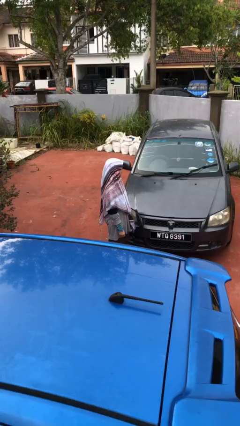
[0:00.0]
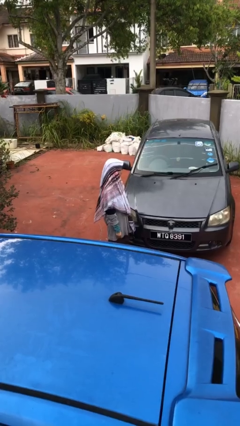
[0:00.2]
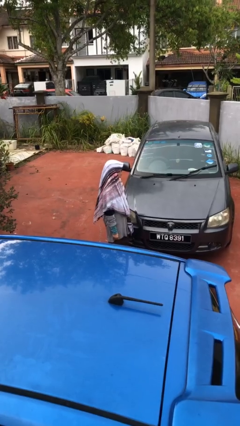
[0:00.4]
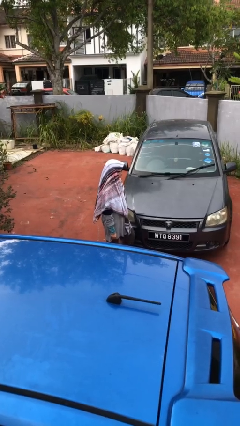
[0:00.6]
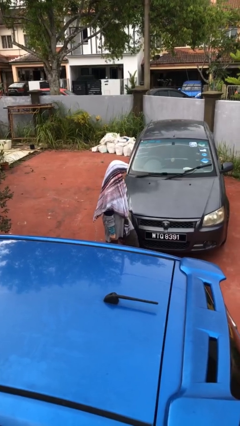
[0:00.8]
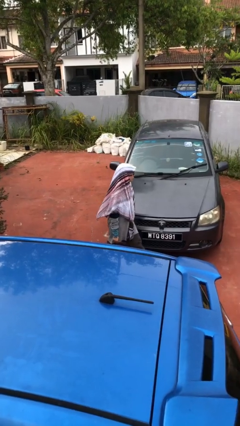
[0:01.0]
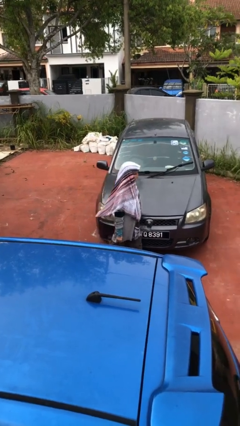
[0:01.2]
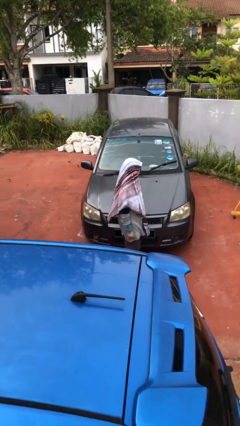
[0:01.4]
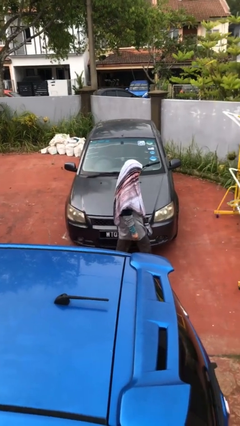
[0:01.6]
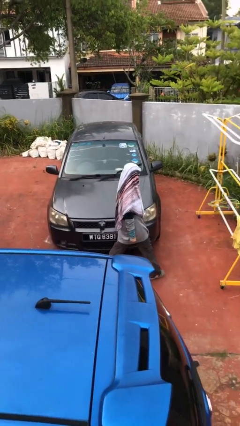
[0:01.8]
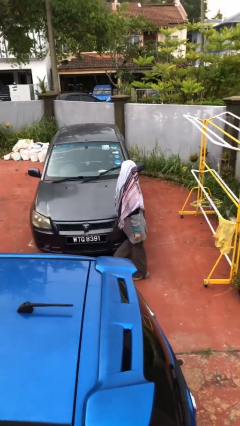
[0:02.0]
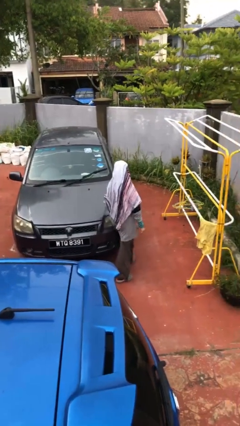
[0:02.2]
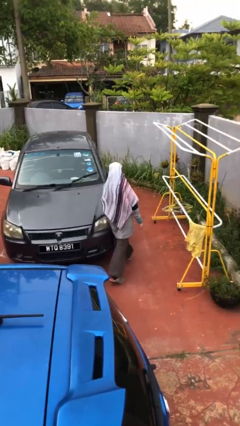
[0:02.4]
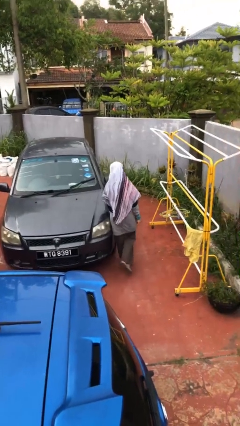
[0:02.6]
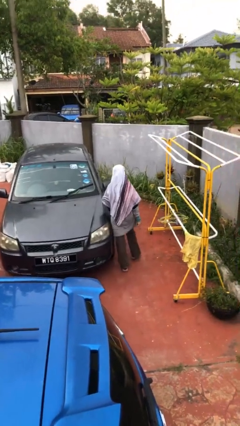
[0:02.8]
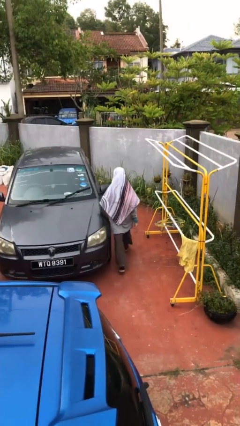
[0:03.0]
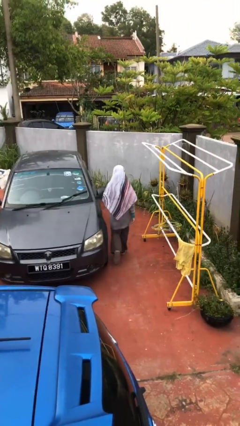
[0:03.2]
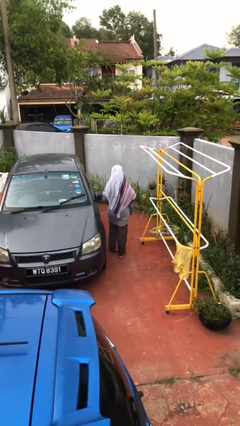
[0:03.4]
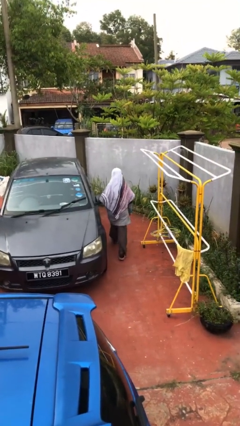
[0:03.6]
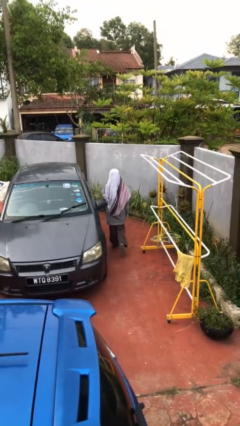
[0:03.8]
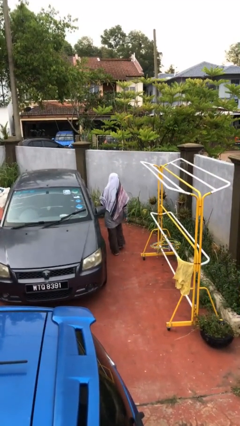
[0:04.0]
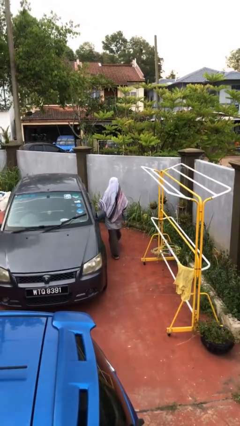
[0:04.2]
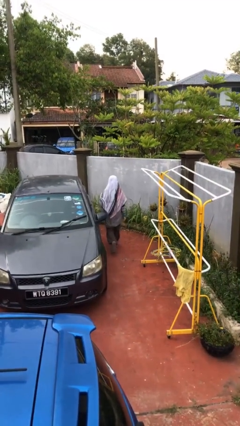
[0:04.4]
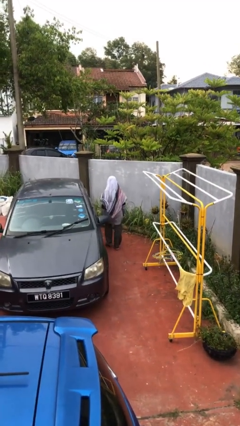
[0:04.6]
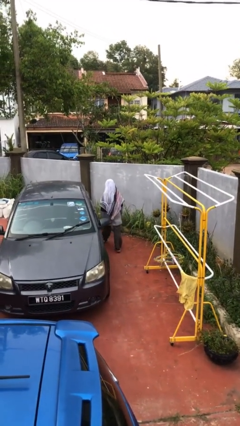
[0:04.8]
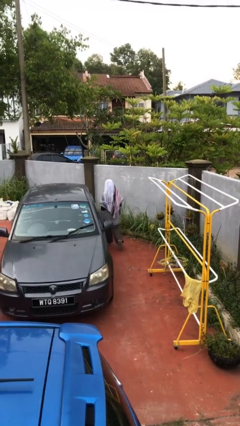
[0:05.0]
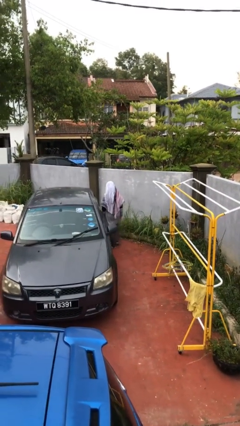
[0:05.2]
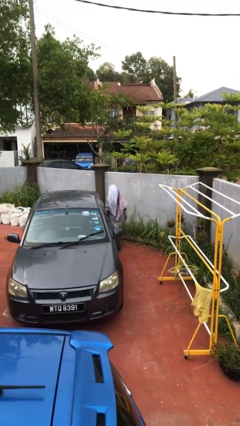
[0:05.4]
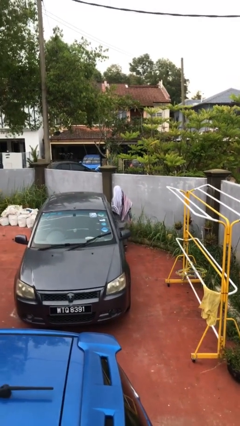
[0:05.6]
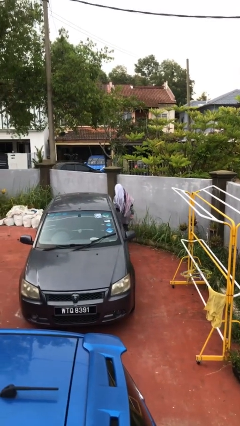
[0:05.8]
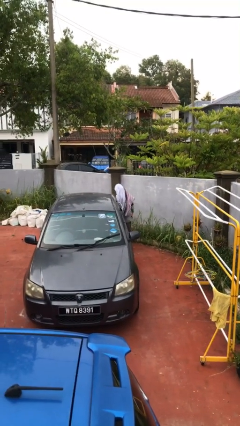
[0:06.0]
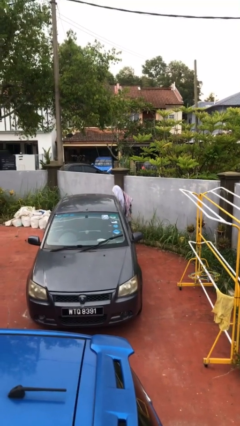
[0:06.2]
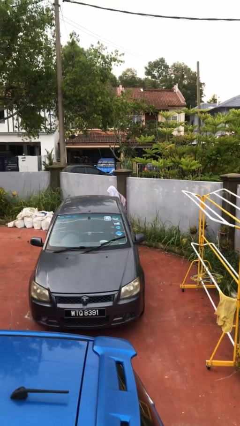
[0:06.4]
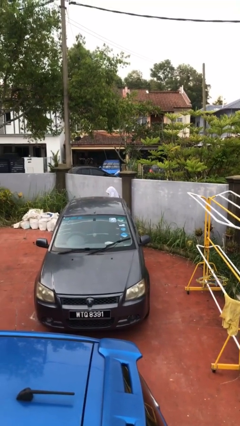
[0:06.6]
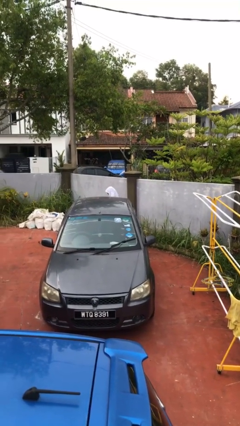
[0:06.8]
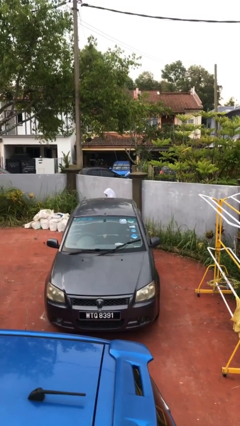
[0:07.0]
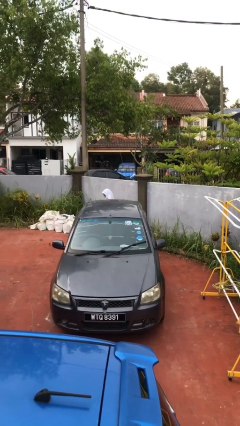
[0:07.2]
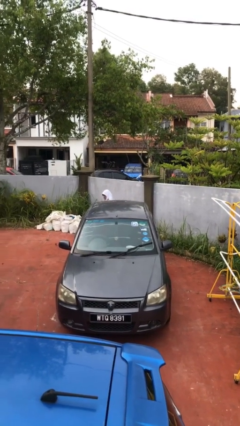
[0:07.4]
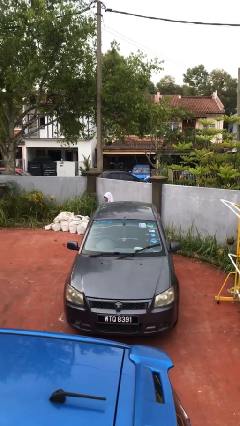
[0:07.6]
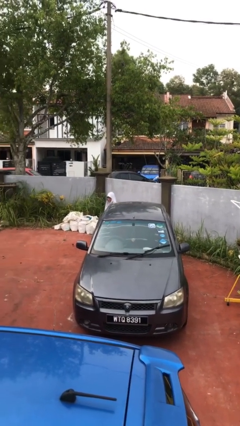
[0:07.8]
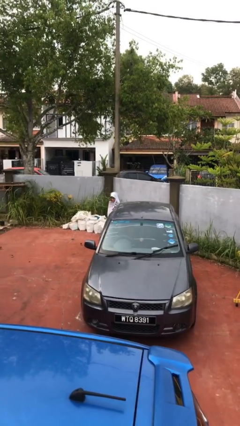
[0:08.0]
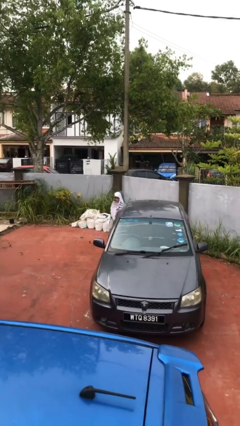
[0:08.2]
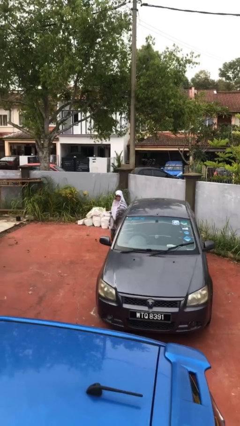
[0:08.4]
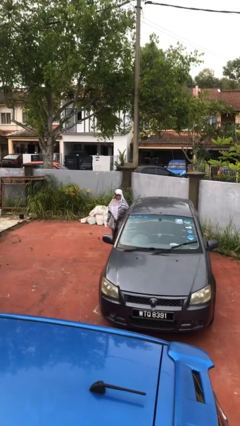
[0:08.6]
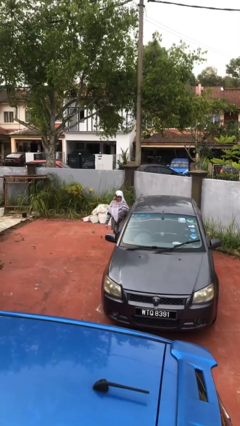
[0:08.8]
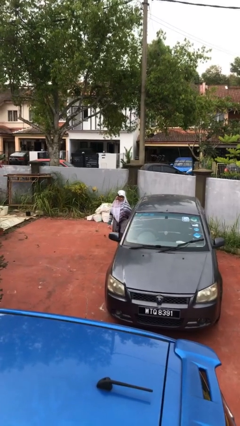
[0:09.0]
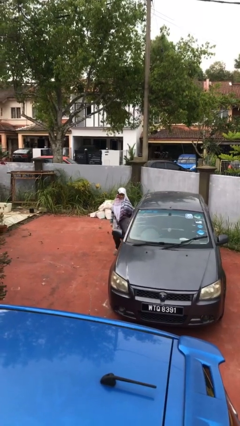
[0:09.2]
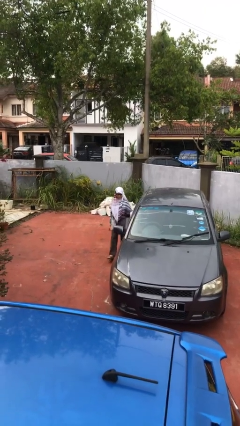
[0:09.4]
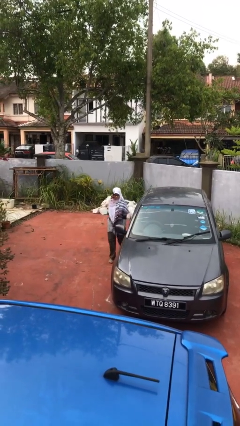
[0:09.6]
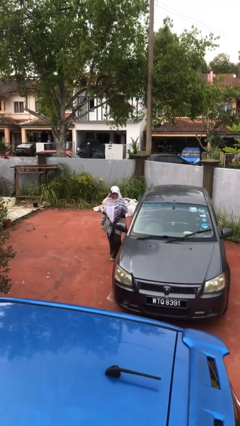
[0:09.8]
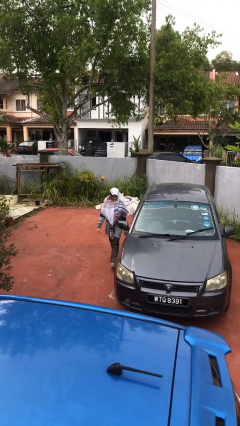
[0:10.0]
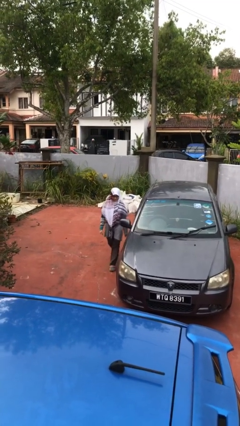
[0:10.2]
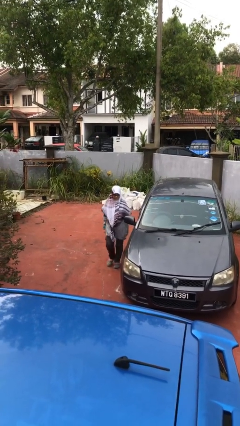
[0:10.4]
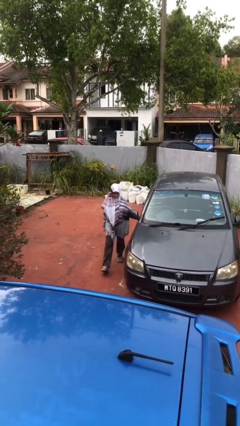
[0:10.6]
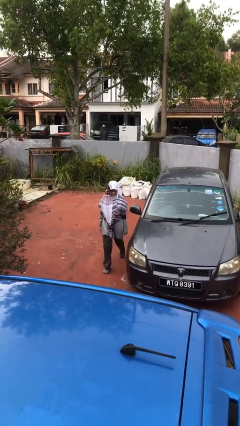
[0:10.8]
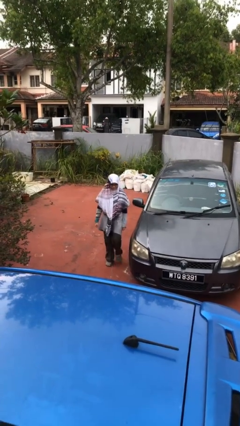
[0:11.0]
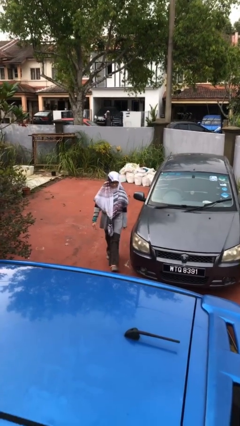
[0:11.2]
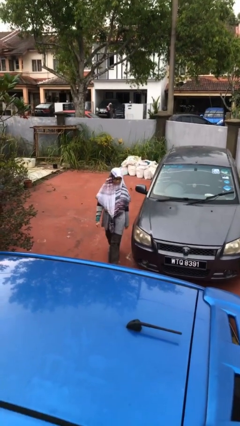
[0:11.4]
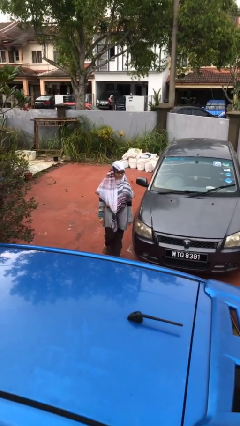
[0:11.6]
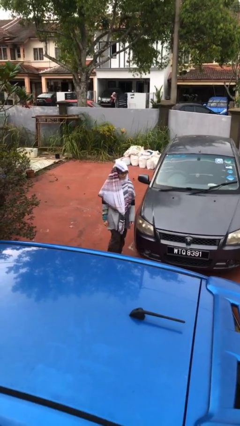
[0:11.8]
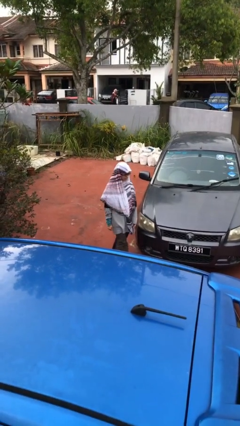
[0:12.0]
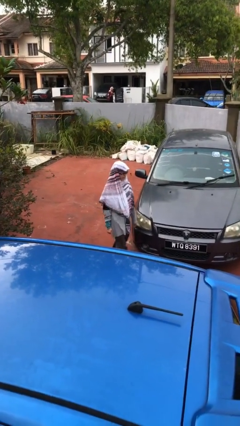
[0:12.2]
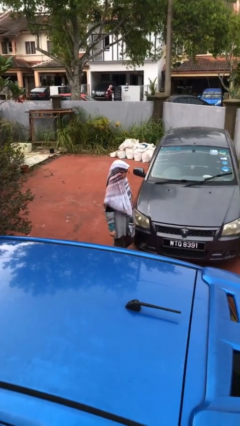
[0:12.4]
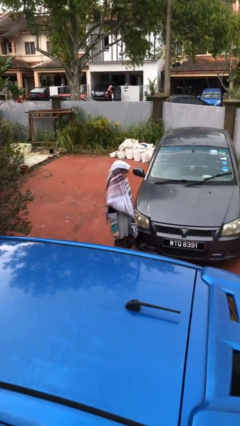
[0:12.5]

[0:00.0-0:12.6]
person walks around car

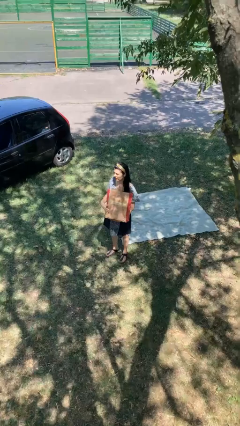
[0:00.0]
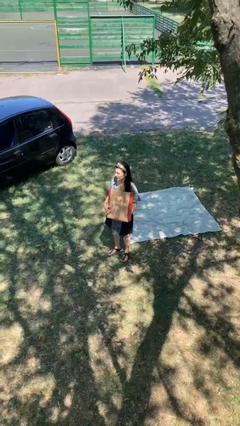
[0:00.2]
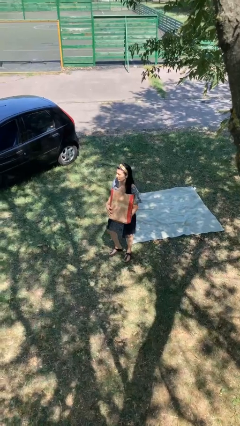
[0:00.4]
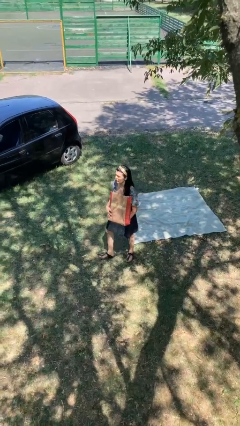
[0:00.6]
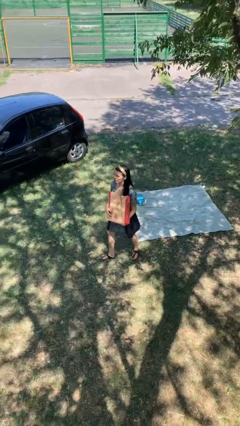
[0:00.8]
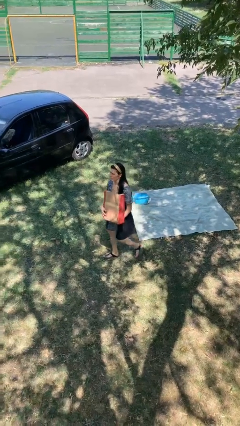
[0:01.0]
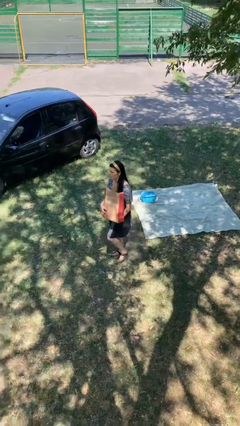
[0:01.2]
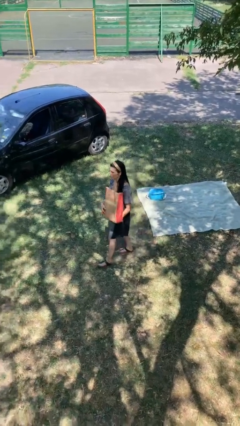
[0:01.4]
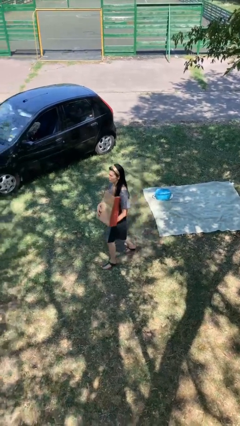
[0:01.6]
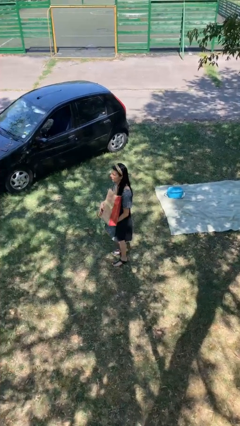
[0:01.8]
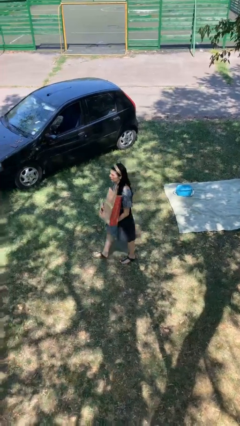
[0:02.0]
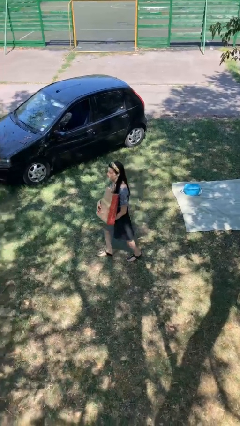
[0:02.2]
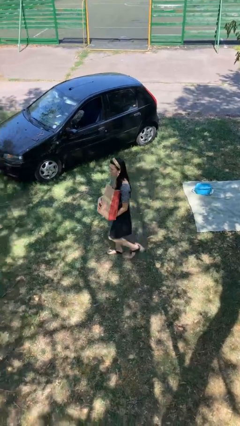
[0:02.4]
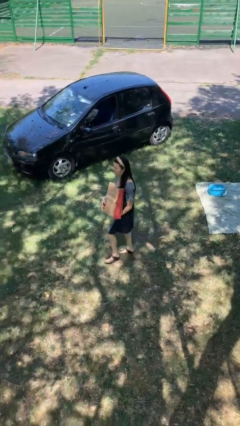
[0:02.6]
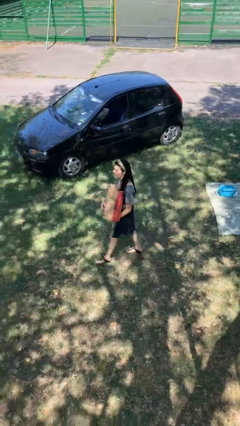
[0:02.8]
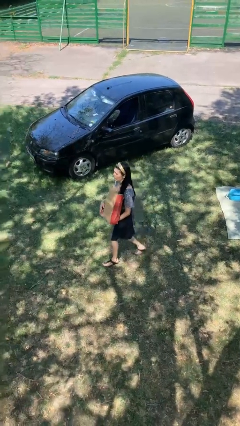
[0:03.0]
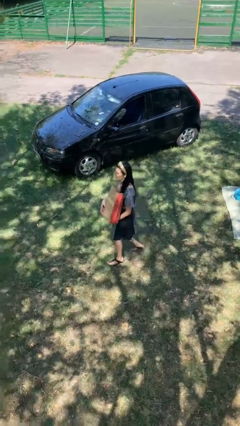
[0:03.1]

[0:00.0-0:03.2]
person carries groceries

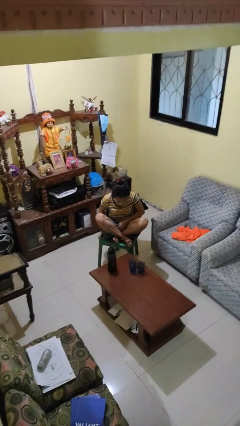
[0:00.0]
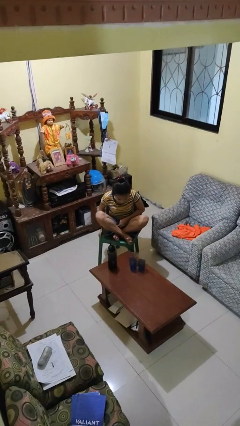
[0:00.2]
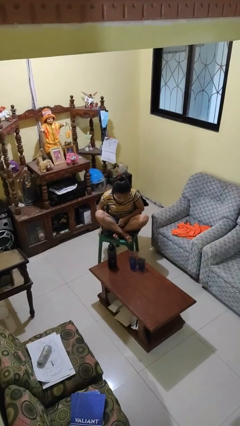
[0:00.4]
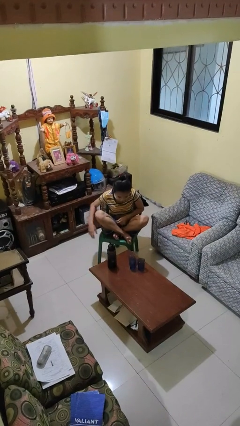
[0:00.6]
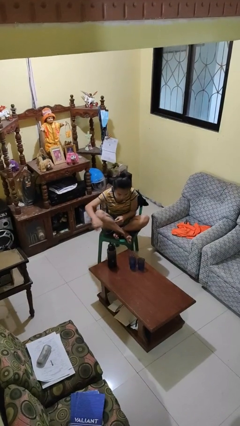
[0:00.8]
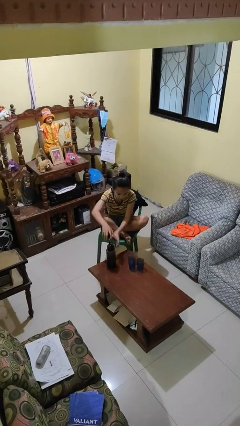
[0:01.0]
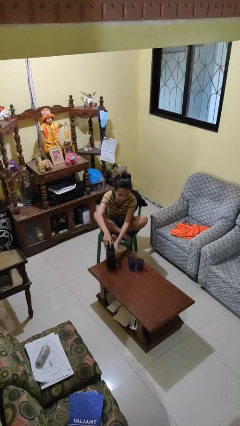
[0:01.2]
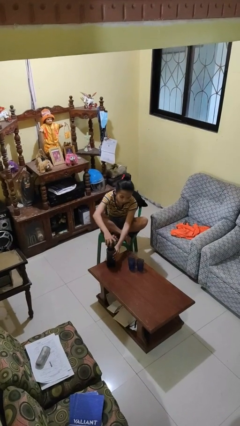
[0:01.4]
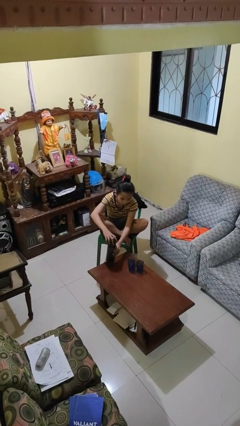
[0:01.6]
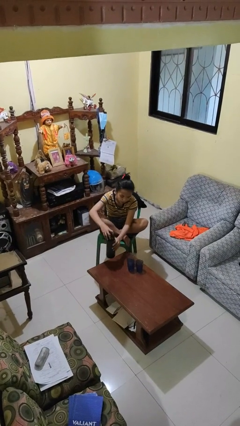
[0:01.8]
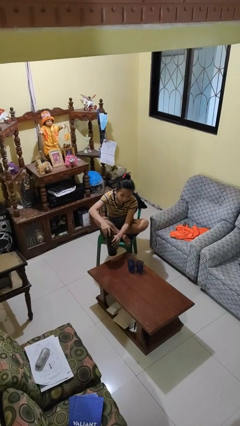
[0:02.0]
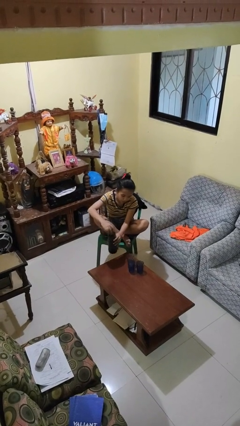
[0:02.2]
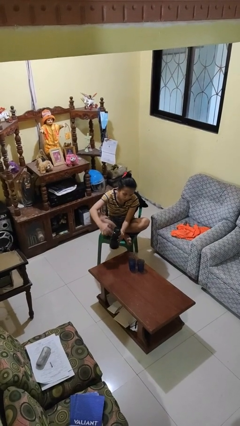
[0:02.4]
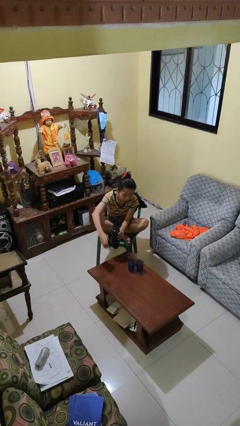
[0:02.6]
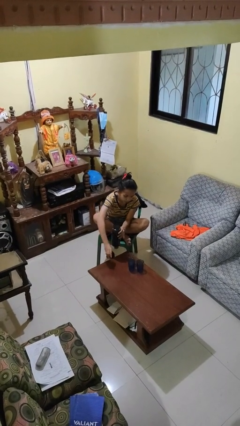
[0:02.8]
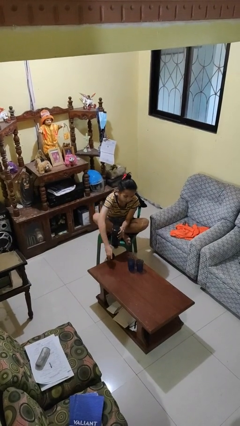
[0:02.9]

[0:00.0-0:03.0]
person unscrews lid from bottle
